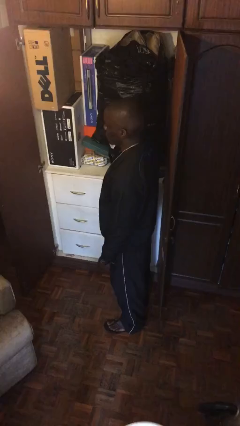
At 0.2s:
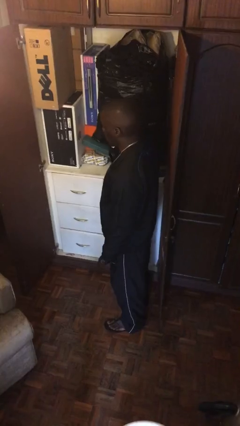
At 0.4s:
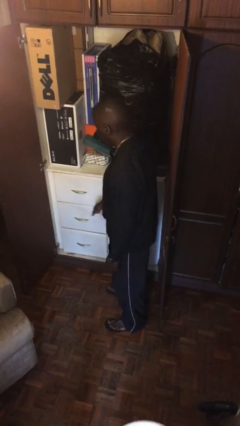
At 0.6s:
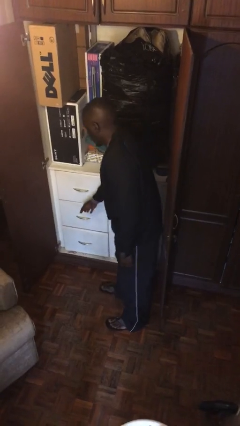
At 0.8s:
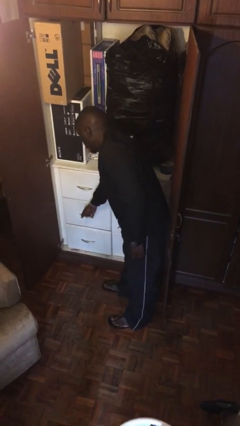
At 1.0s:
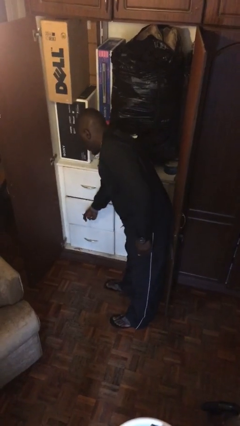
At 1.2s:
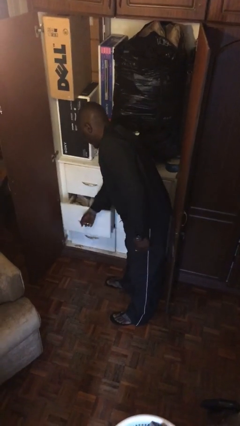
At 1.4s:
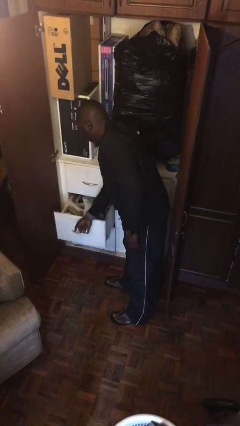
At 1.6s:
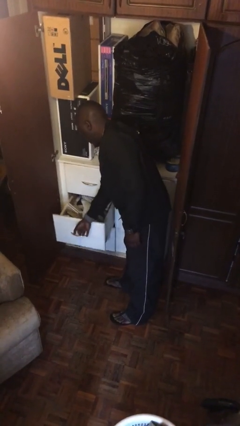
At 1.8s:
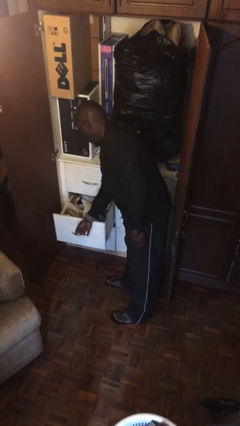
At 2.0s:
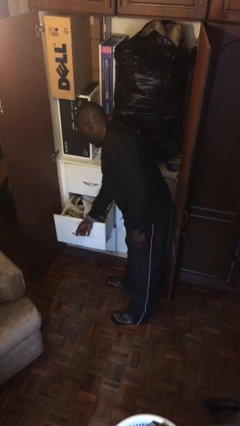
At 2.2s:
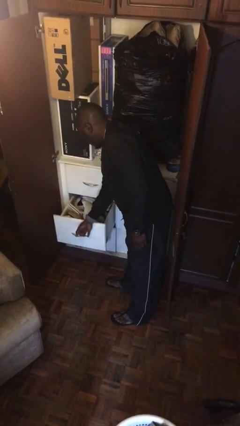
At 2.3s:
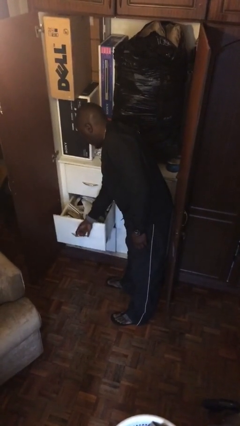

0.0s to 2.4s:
person opens dresser drawer

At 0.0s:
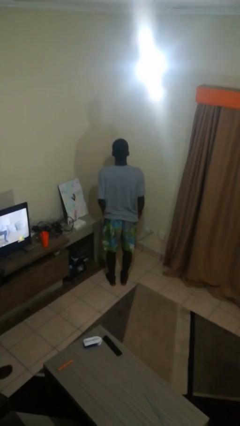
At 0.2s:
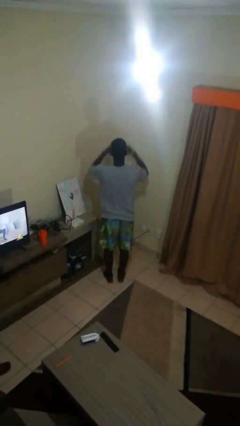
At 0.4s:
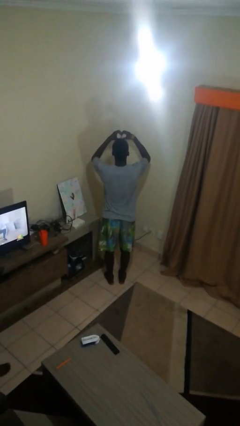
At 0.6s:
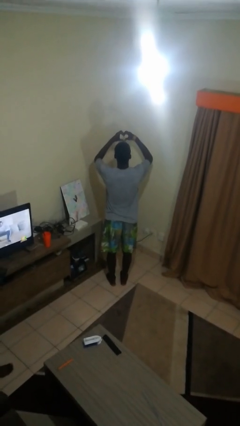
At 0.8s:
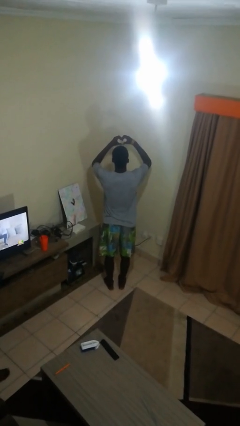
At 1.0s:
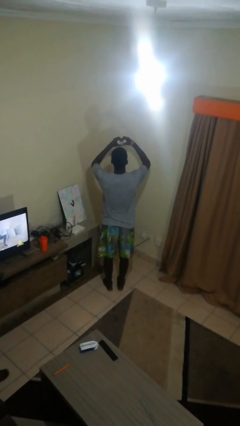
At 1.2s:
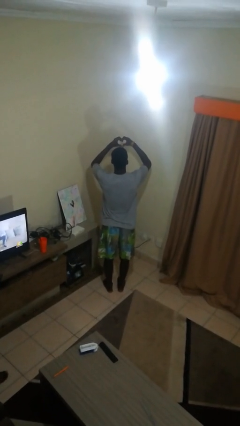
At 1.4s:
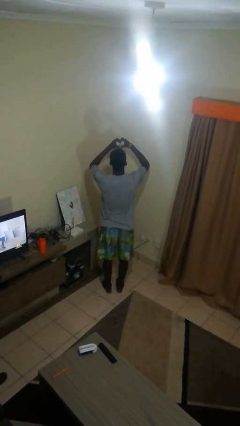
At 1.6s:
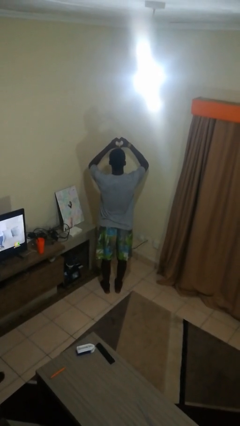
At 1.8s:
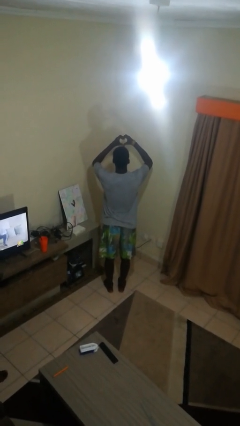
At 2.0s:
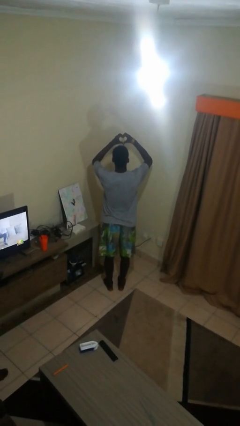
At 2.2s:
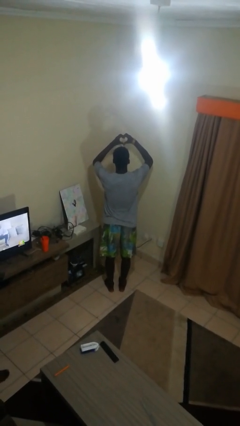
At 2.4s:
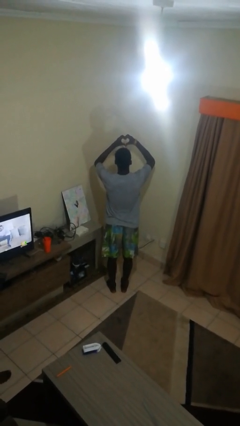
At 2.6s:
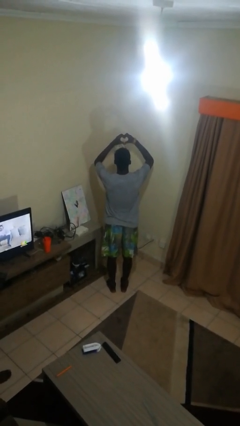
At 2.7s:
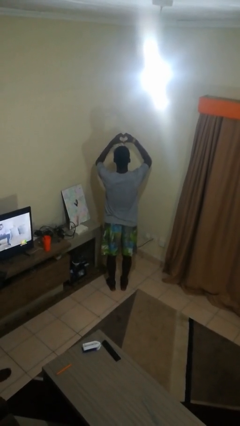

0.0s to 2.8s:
person gestures heart

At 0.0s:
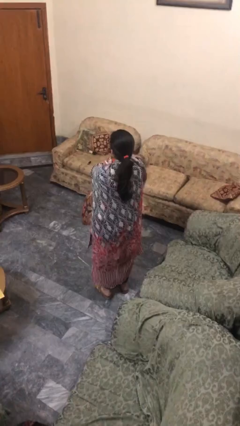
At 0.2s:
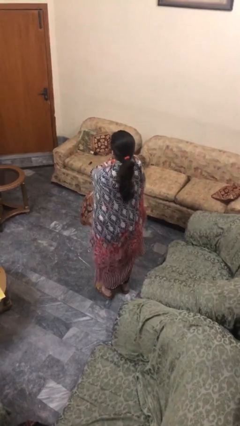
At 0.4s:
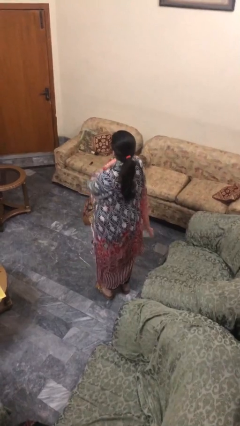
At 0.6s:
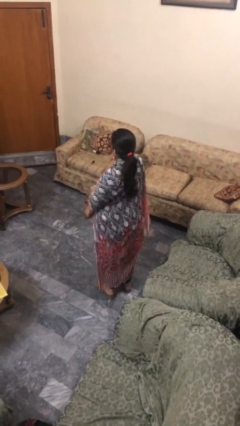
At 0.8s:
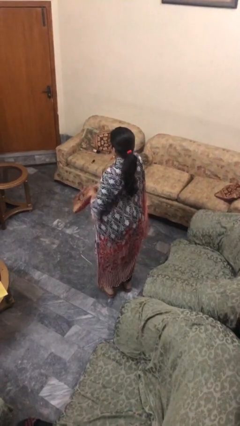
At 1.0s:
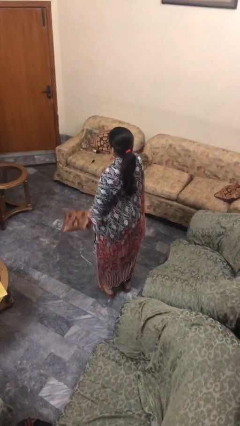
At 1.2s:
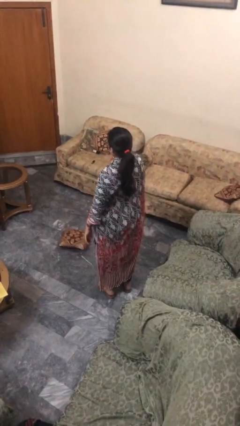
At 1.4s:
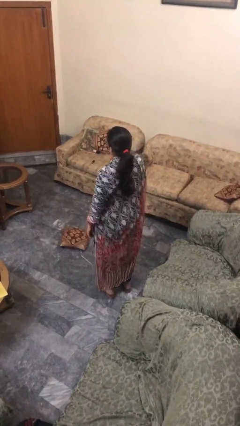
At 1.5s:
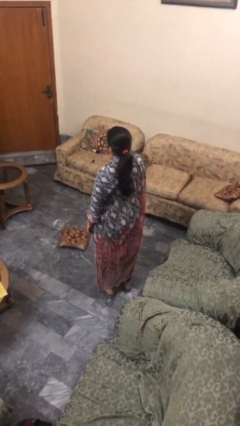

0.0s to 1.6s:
person throws object to ground

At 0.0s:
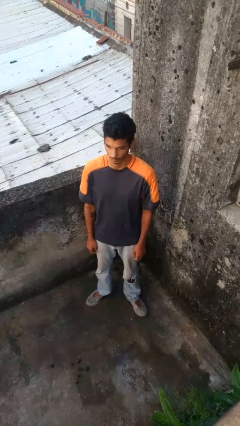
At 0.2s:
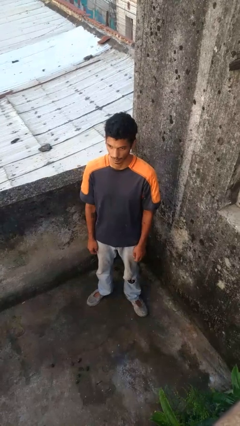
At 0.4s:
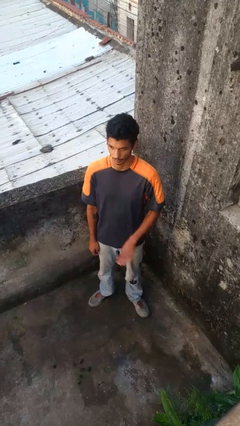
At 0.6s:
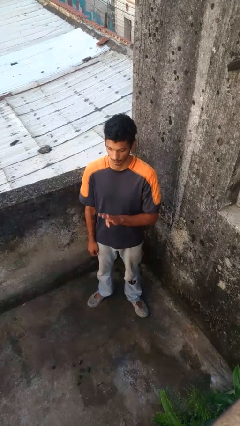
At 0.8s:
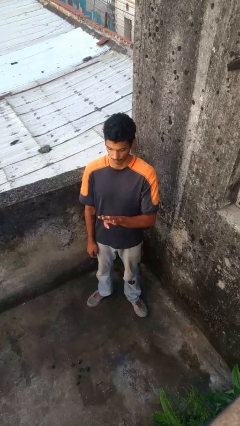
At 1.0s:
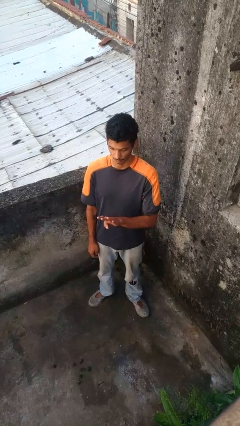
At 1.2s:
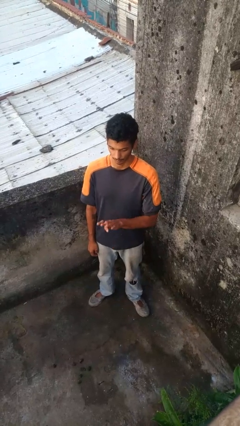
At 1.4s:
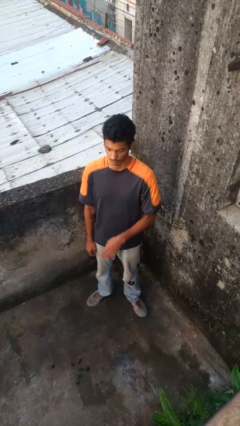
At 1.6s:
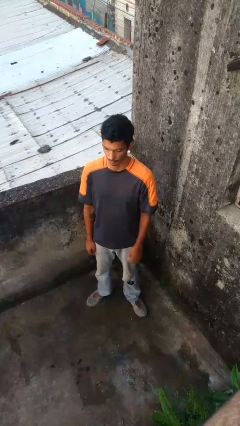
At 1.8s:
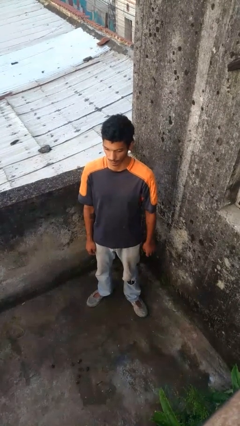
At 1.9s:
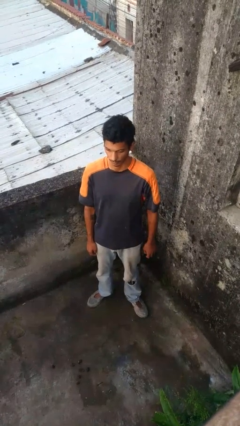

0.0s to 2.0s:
person gestures number four

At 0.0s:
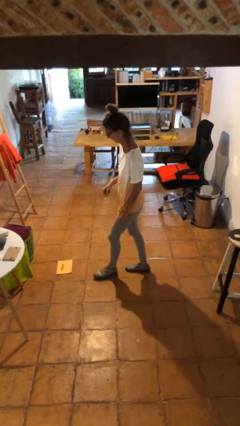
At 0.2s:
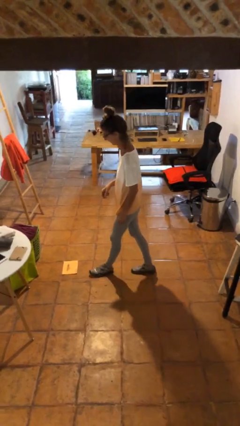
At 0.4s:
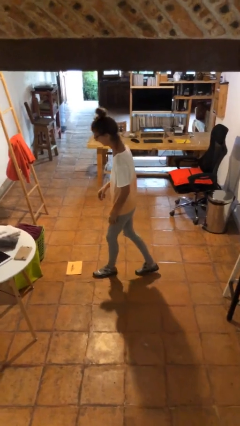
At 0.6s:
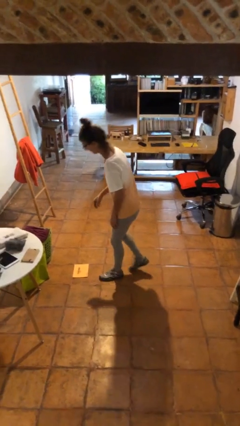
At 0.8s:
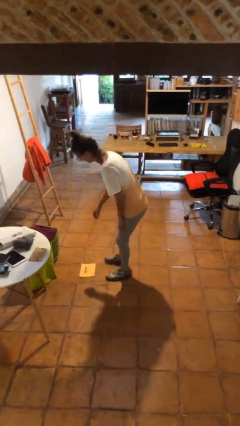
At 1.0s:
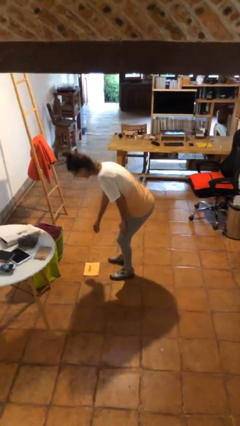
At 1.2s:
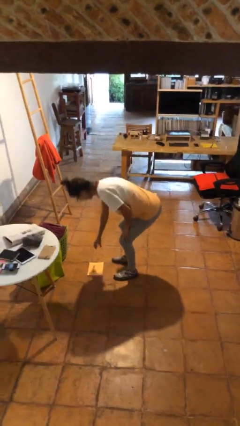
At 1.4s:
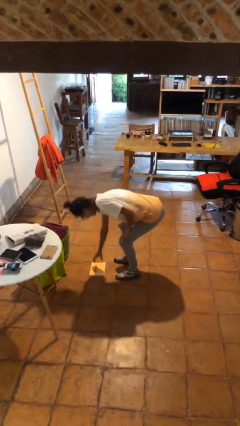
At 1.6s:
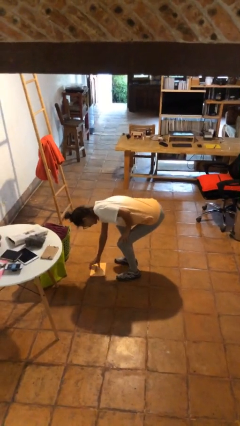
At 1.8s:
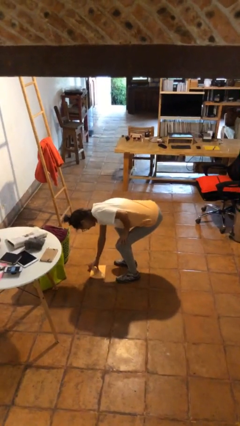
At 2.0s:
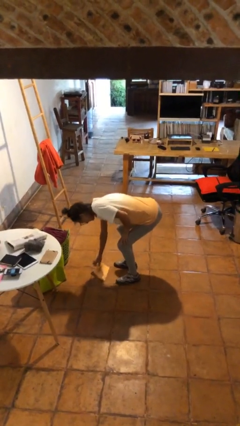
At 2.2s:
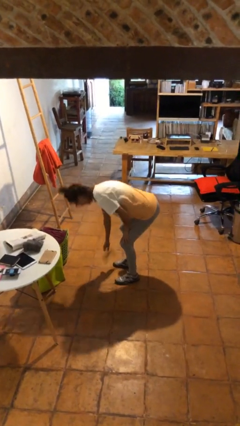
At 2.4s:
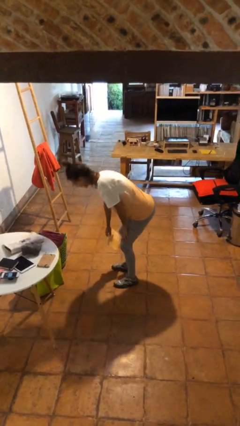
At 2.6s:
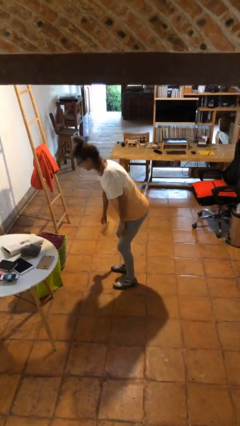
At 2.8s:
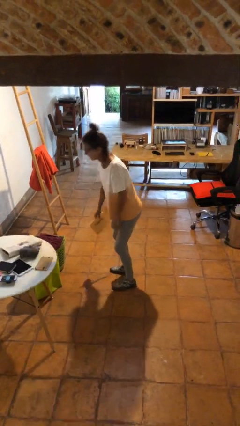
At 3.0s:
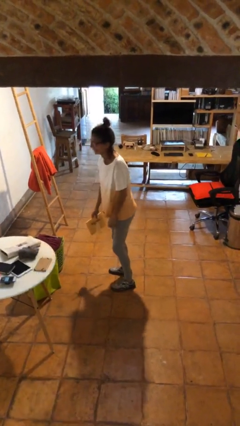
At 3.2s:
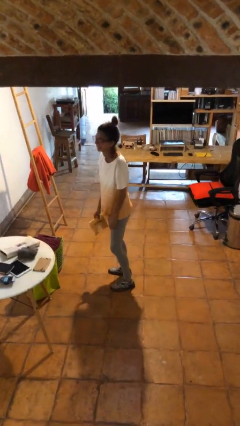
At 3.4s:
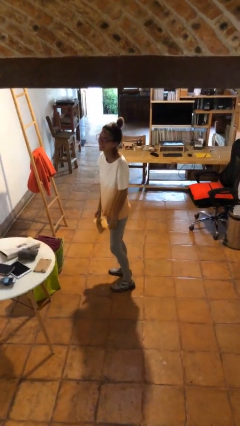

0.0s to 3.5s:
person picks up object from floor

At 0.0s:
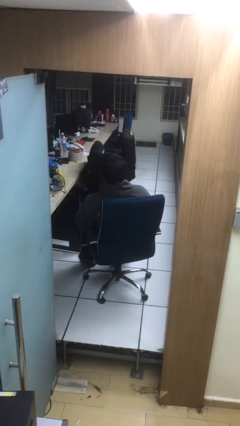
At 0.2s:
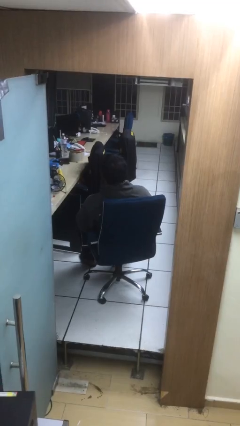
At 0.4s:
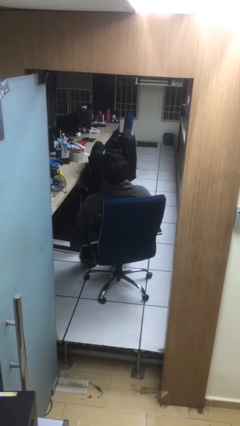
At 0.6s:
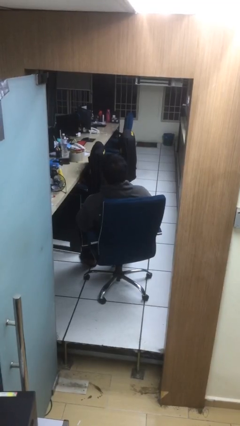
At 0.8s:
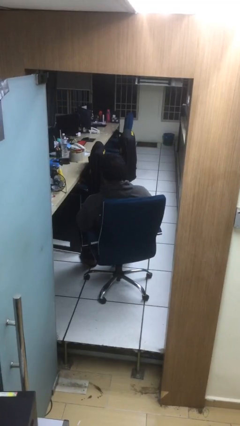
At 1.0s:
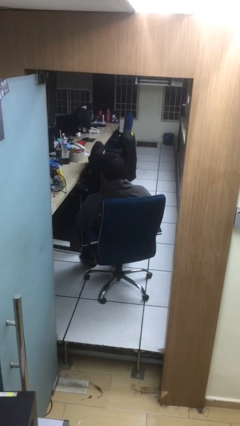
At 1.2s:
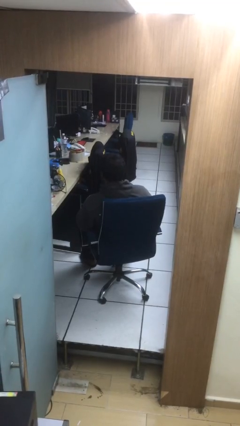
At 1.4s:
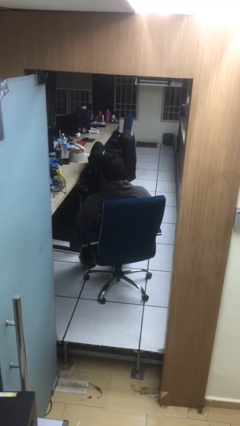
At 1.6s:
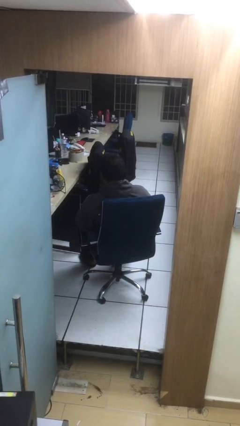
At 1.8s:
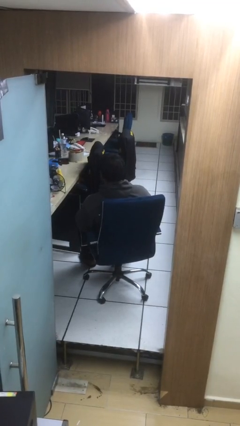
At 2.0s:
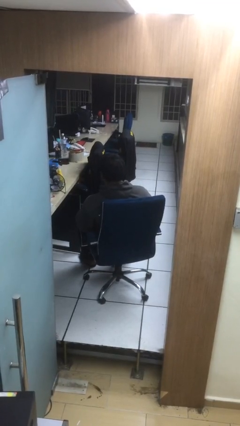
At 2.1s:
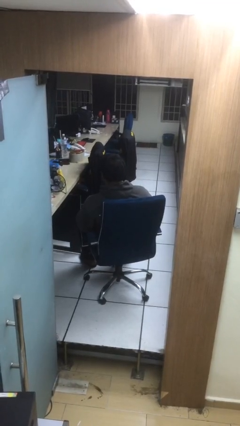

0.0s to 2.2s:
person nods head

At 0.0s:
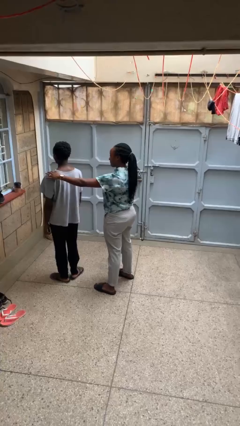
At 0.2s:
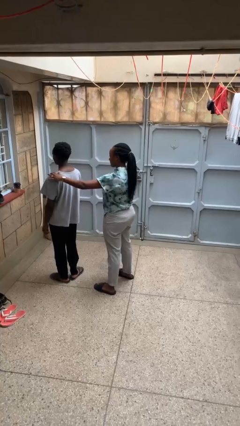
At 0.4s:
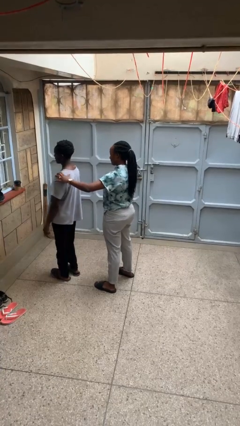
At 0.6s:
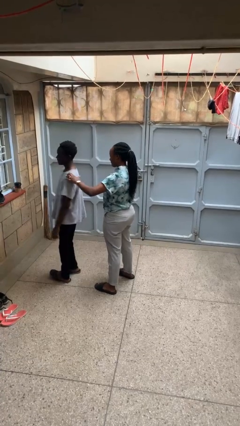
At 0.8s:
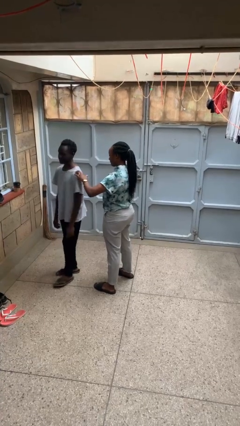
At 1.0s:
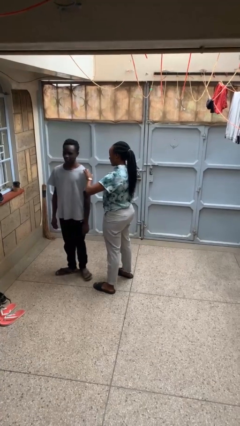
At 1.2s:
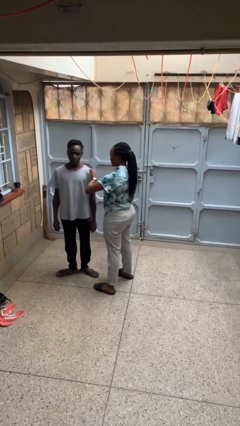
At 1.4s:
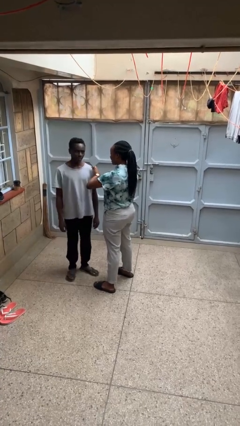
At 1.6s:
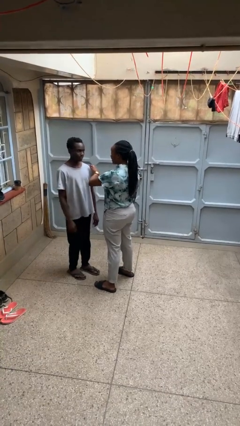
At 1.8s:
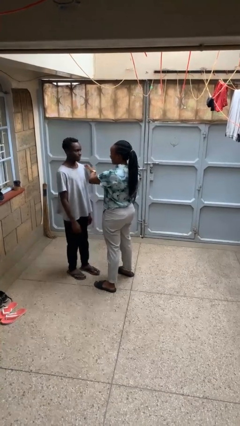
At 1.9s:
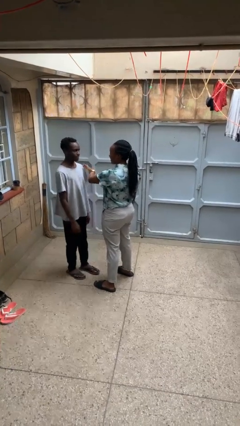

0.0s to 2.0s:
person spins person around

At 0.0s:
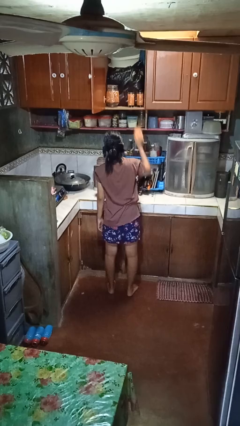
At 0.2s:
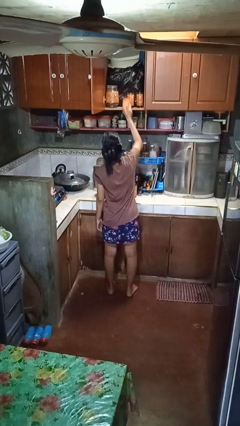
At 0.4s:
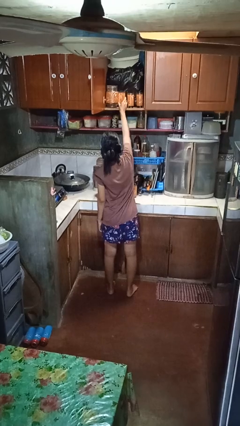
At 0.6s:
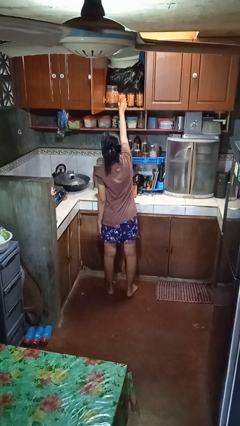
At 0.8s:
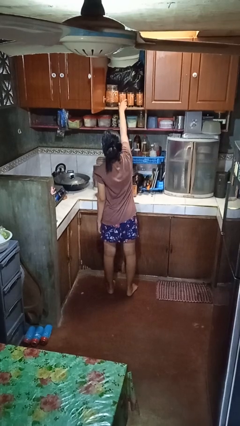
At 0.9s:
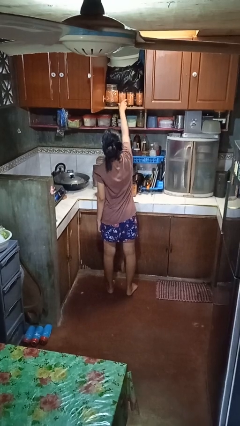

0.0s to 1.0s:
person puts object in cabinet
